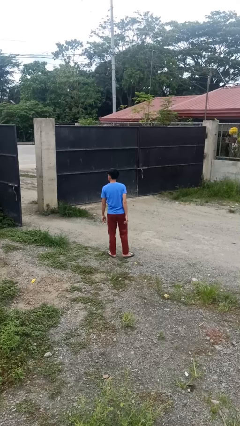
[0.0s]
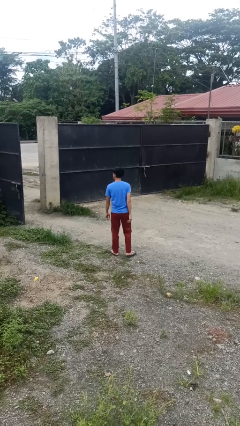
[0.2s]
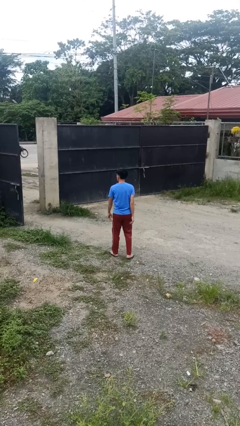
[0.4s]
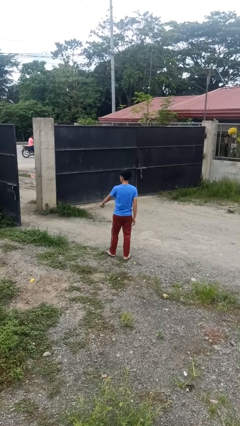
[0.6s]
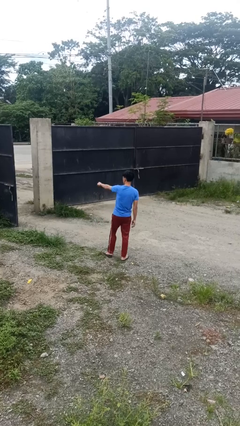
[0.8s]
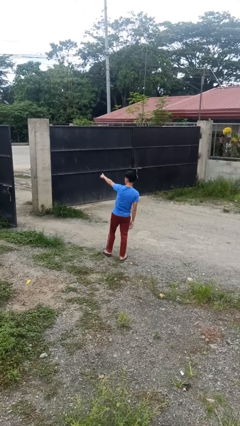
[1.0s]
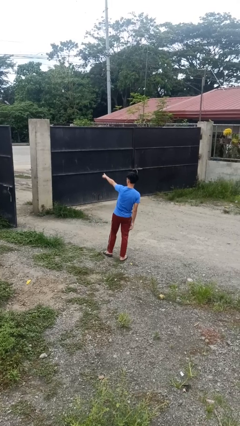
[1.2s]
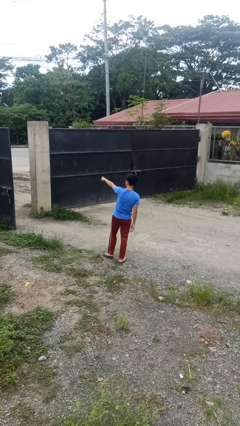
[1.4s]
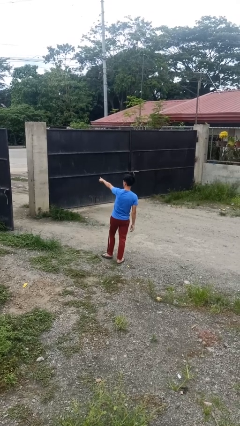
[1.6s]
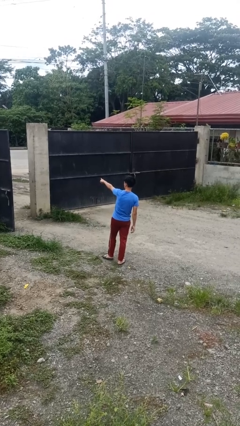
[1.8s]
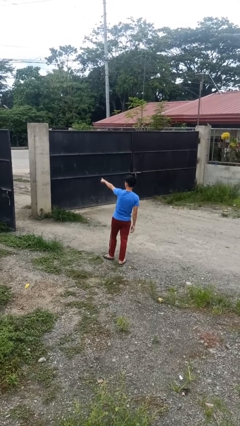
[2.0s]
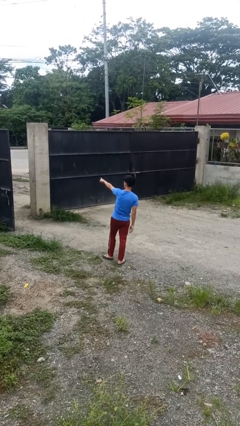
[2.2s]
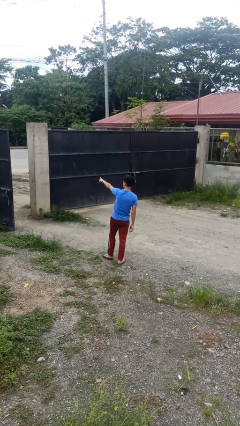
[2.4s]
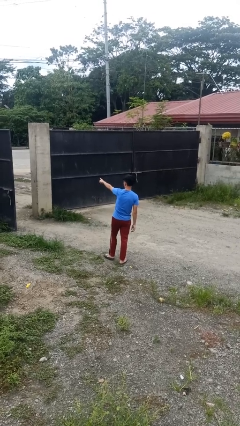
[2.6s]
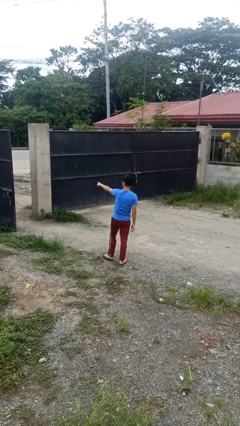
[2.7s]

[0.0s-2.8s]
person points at person

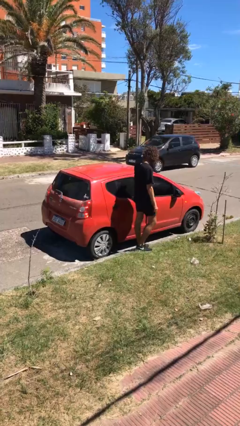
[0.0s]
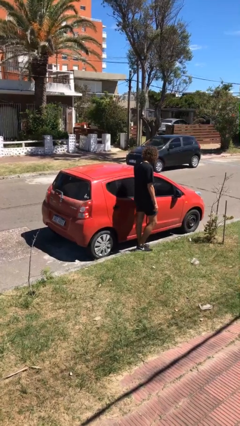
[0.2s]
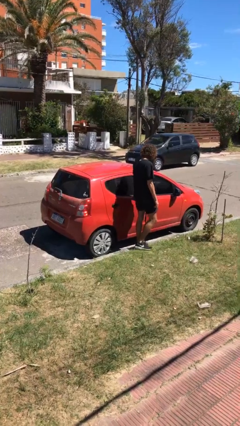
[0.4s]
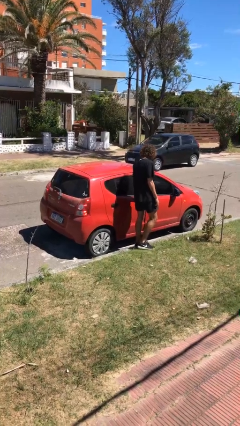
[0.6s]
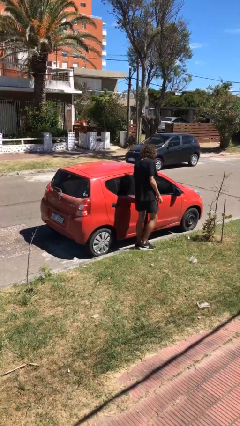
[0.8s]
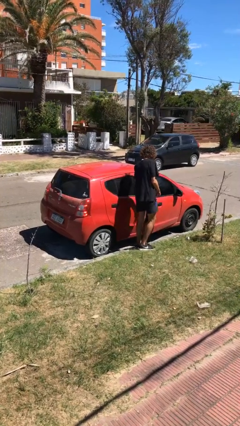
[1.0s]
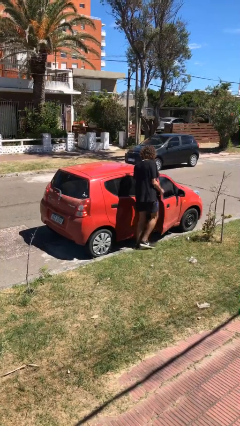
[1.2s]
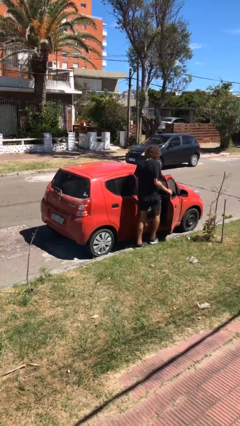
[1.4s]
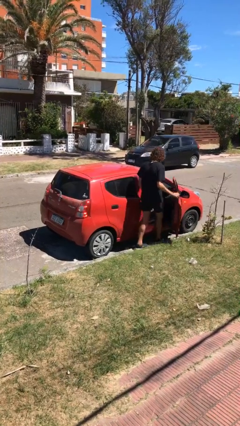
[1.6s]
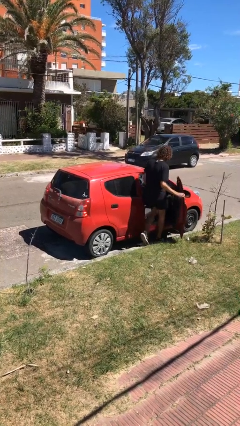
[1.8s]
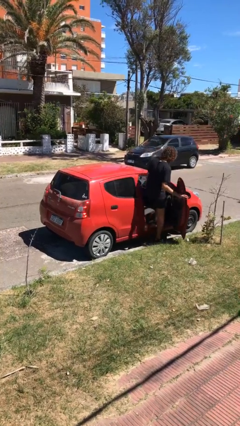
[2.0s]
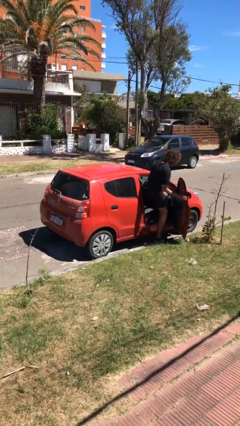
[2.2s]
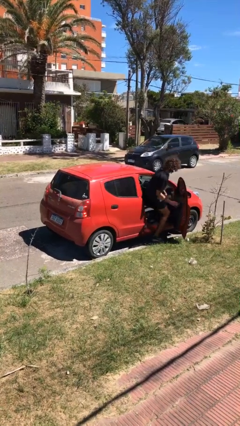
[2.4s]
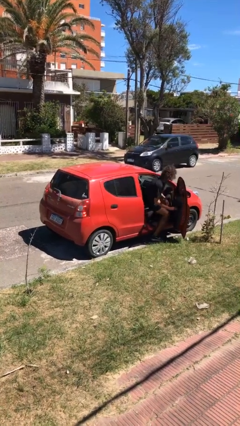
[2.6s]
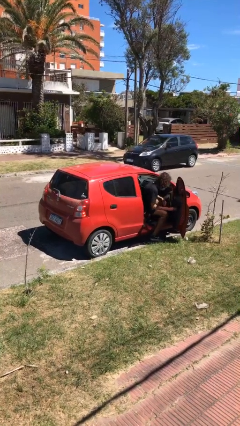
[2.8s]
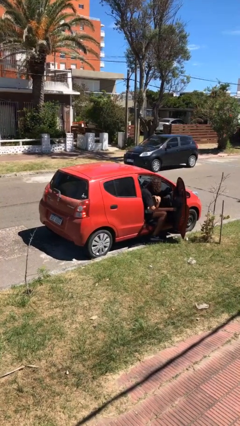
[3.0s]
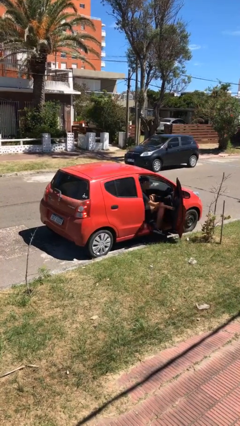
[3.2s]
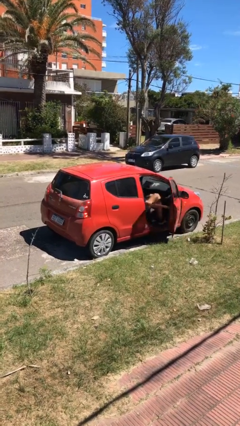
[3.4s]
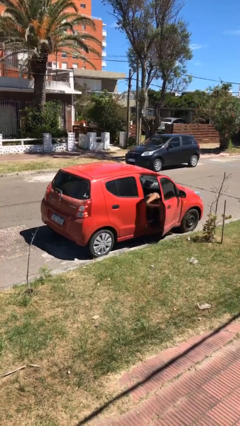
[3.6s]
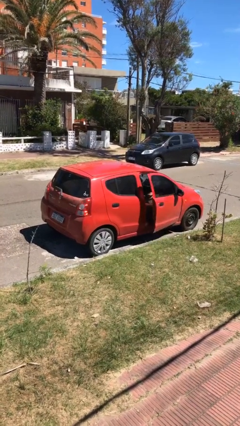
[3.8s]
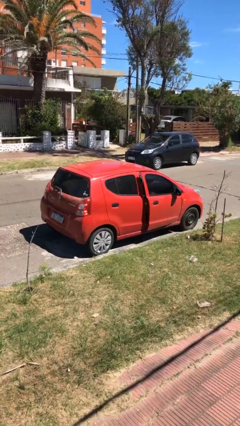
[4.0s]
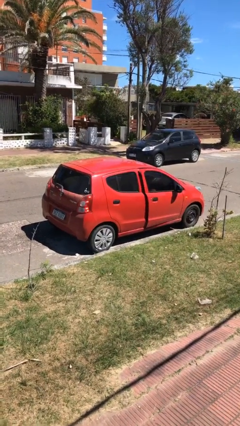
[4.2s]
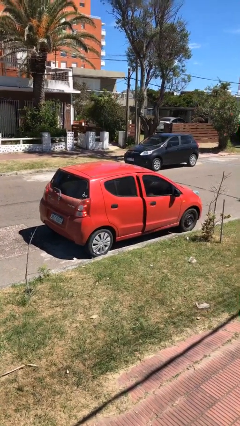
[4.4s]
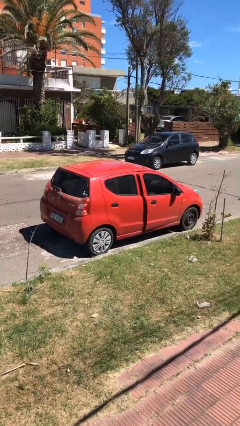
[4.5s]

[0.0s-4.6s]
car picks up person

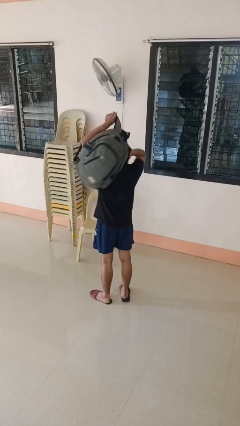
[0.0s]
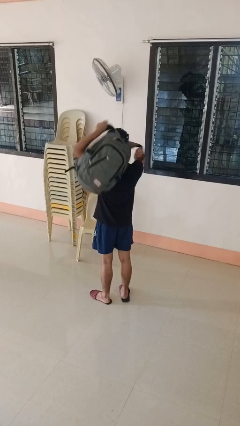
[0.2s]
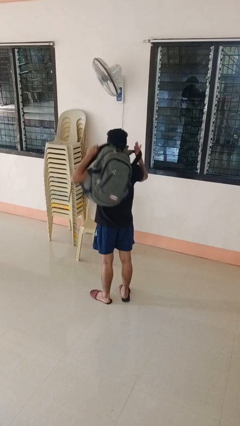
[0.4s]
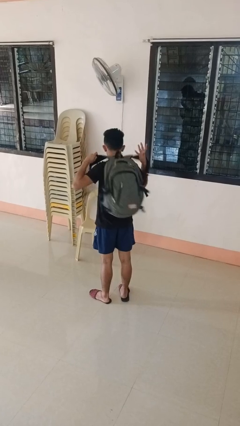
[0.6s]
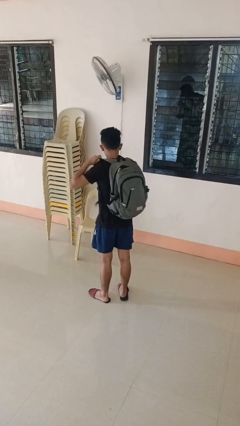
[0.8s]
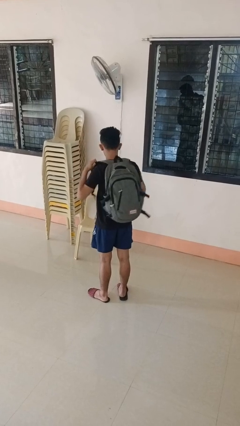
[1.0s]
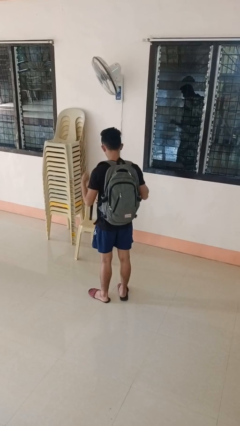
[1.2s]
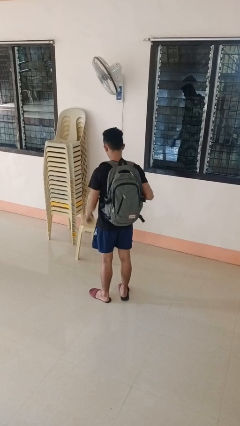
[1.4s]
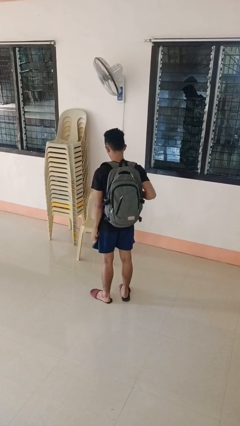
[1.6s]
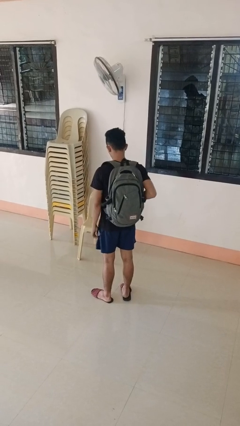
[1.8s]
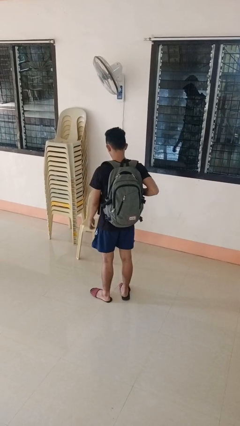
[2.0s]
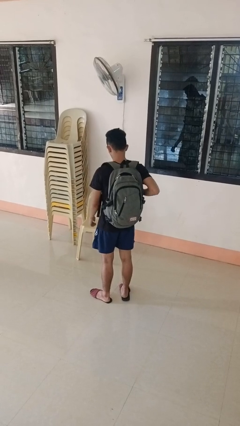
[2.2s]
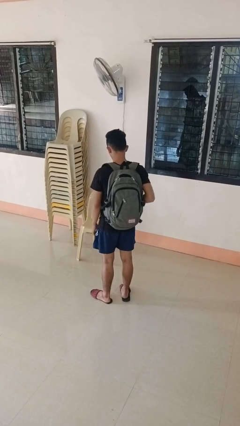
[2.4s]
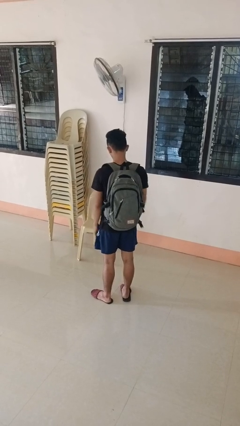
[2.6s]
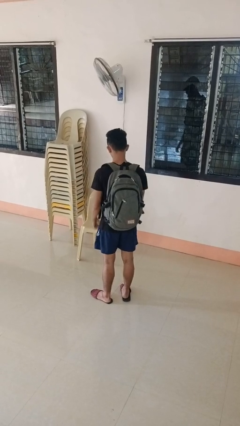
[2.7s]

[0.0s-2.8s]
person puts on backpack

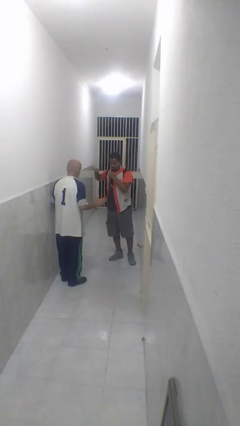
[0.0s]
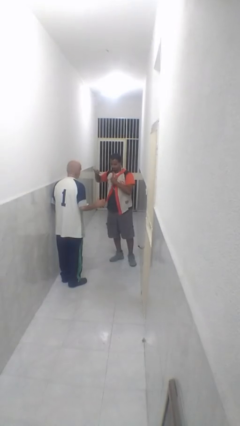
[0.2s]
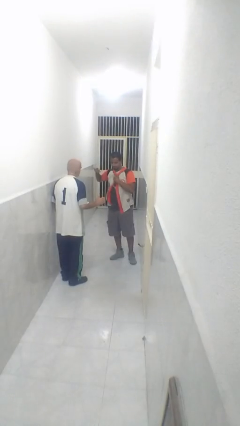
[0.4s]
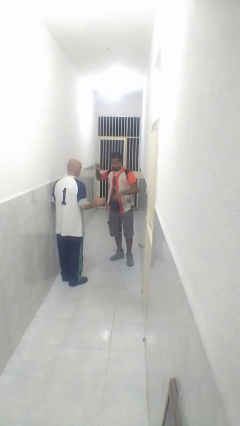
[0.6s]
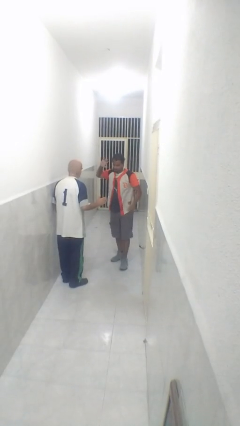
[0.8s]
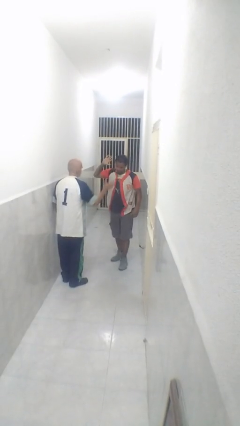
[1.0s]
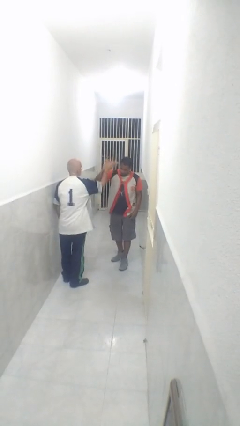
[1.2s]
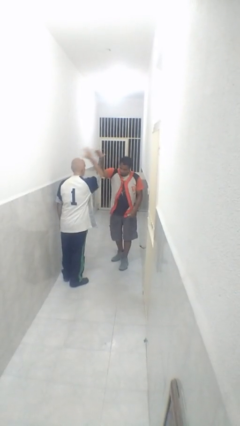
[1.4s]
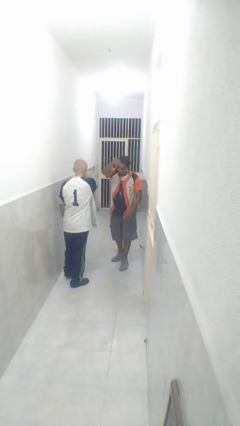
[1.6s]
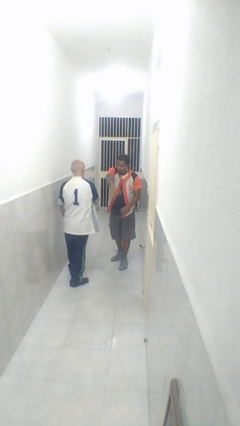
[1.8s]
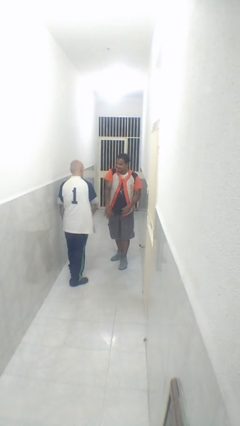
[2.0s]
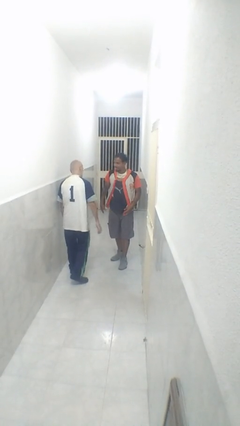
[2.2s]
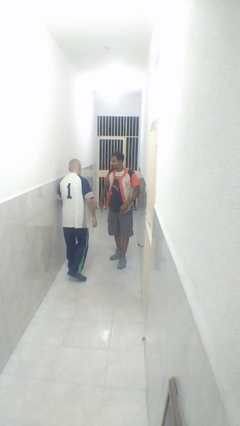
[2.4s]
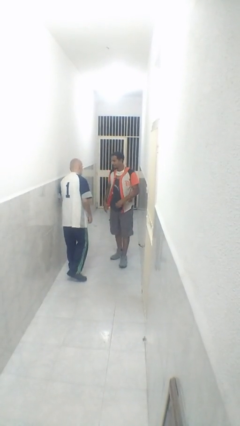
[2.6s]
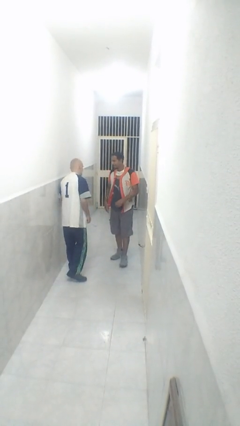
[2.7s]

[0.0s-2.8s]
person highfives hand

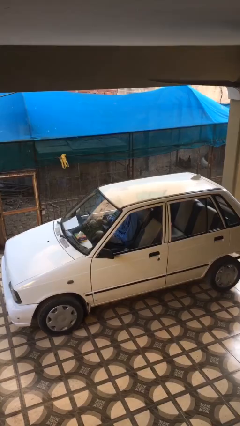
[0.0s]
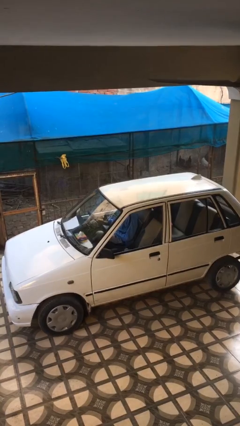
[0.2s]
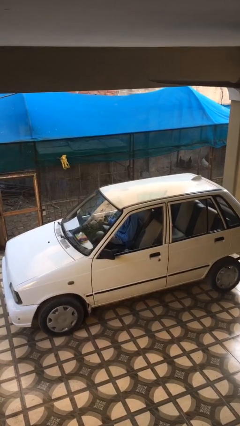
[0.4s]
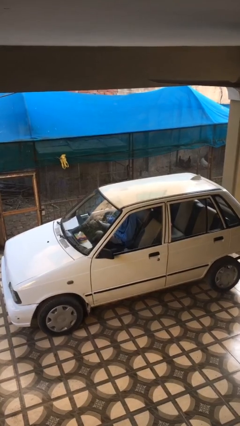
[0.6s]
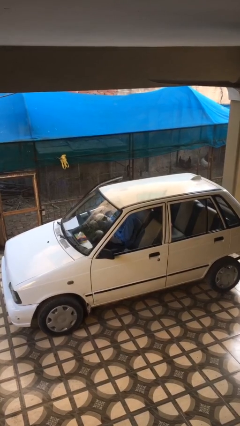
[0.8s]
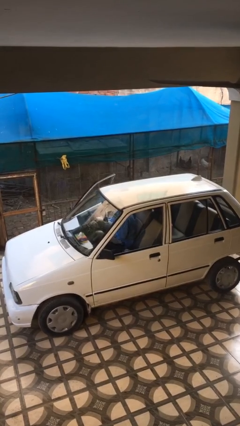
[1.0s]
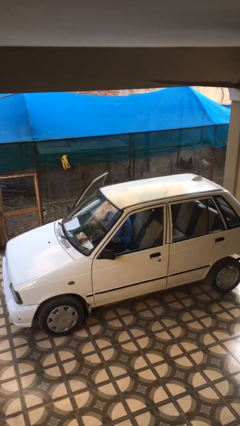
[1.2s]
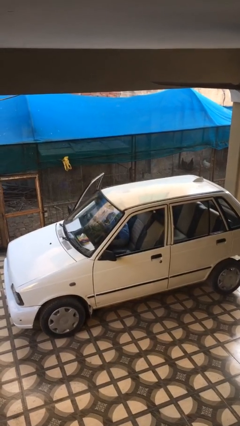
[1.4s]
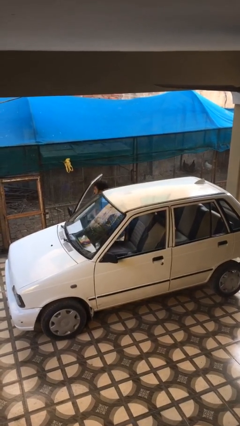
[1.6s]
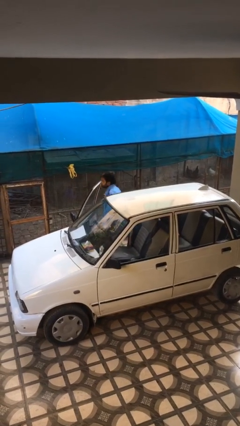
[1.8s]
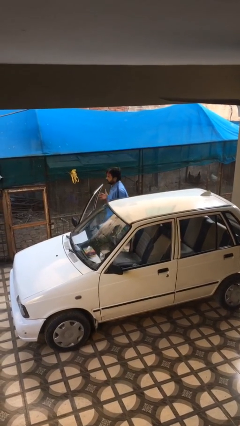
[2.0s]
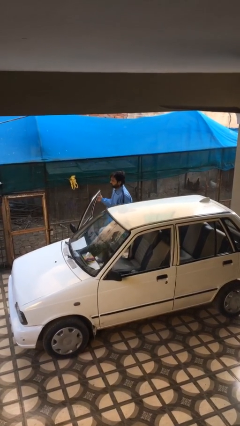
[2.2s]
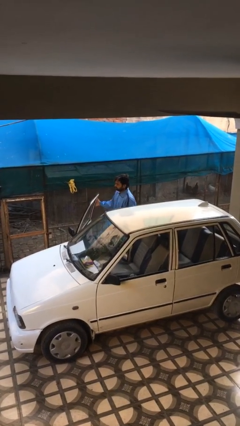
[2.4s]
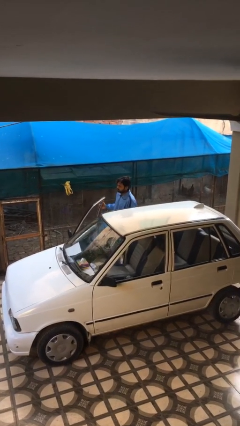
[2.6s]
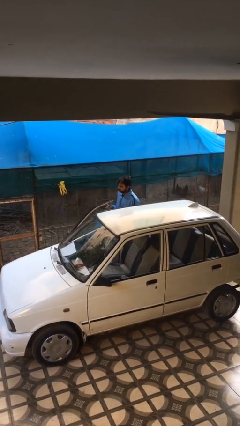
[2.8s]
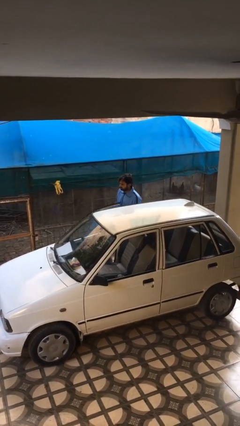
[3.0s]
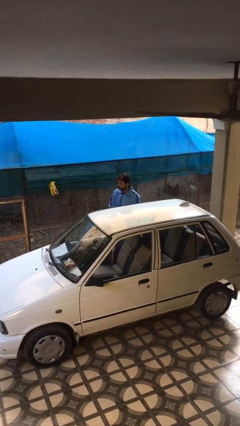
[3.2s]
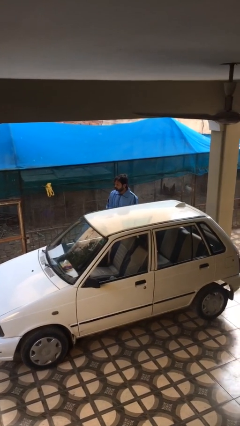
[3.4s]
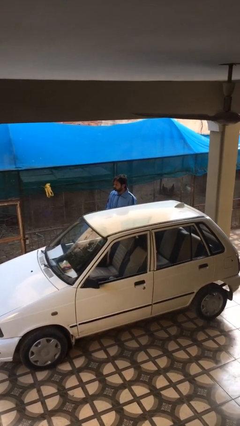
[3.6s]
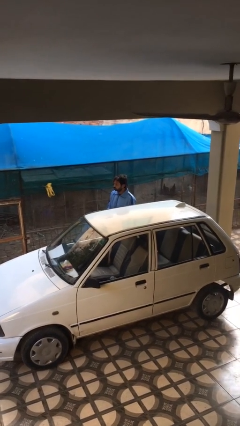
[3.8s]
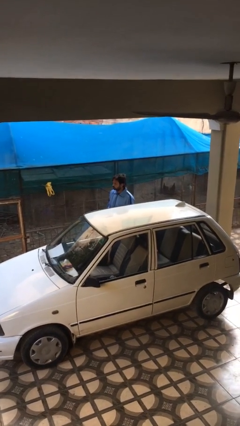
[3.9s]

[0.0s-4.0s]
person exits car

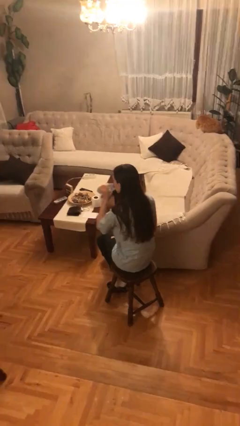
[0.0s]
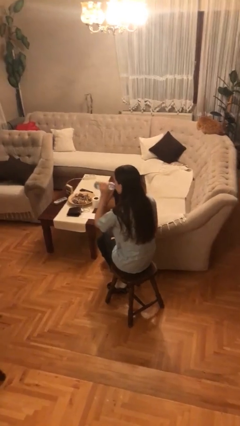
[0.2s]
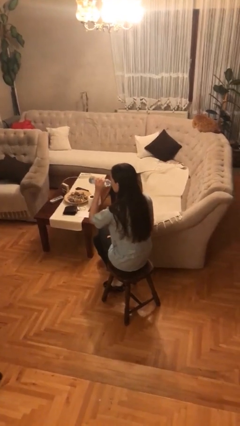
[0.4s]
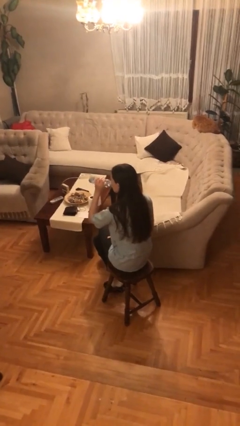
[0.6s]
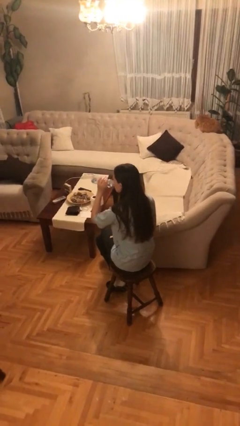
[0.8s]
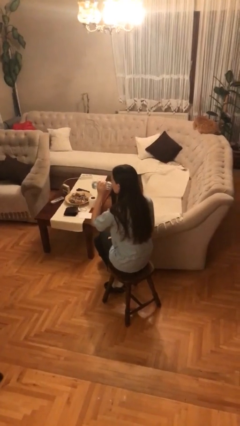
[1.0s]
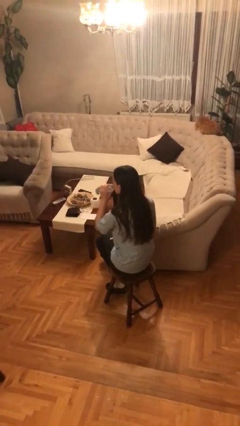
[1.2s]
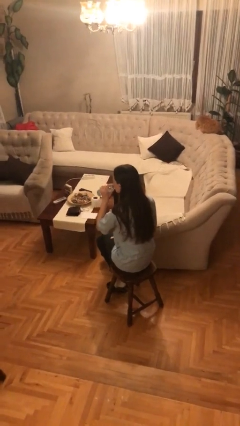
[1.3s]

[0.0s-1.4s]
person drinks from bottle
